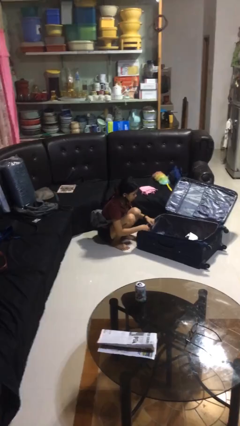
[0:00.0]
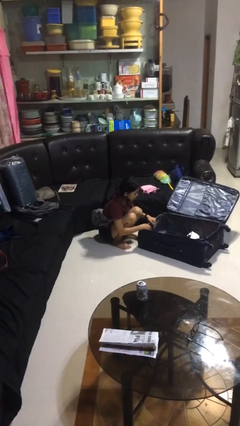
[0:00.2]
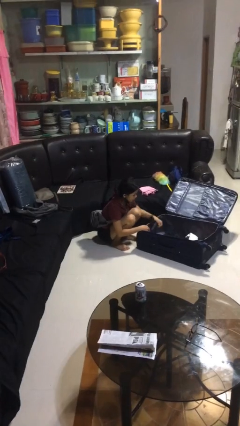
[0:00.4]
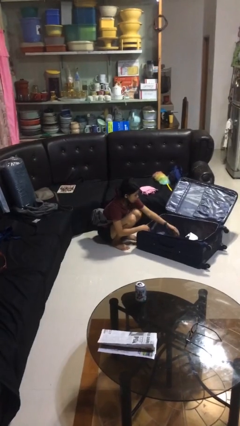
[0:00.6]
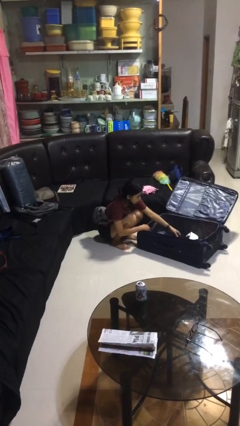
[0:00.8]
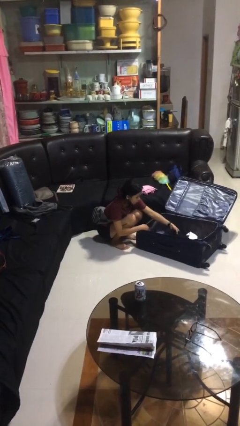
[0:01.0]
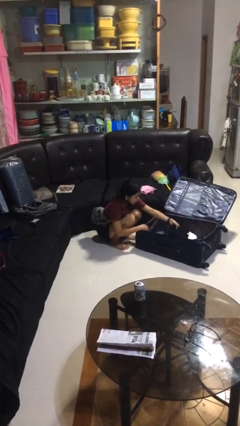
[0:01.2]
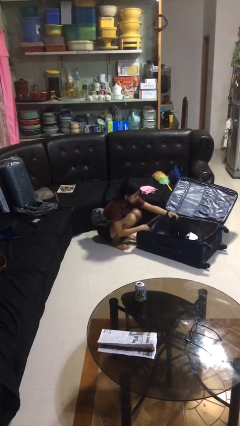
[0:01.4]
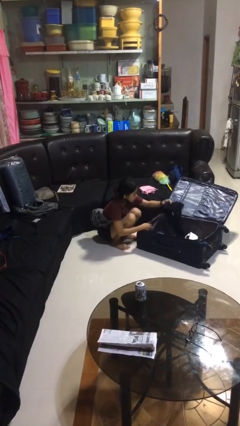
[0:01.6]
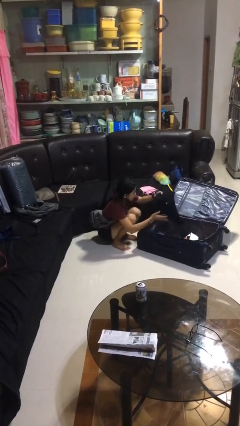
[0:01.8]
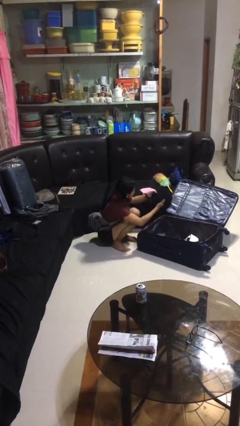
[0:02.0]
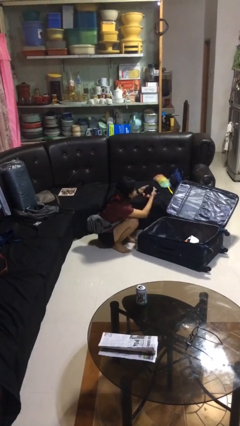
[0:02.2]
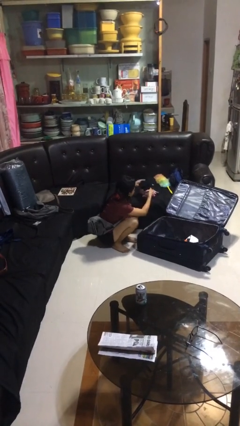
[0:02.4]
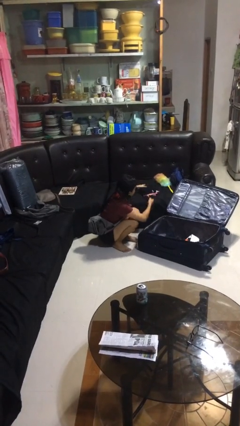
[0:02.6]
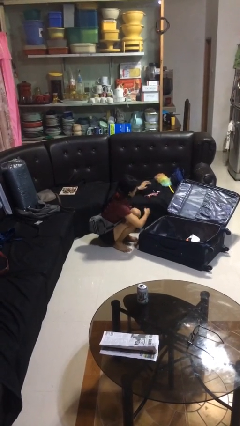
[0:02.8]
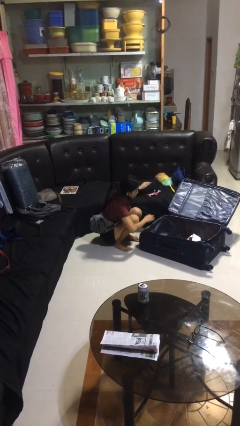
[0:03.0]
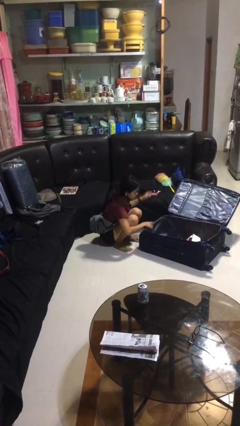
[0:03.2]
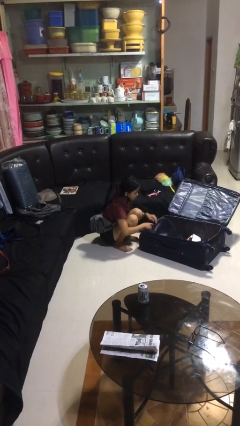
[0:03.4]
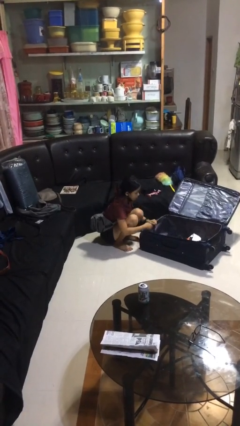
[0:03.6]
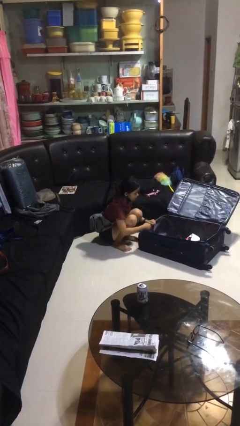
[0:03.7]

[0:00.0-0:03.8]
person loads clothes into suitcase

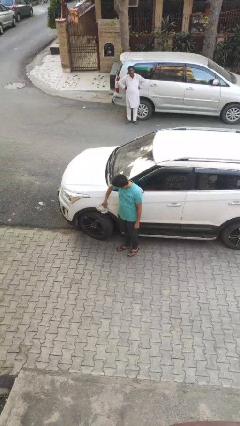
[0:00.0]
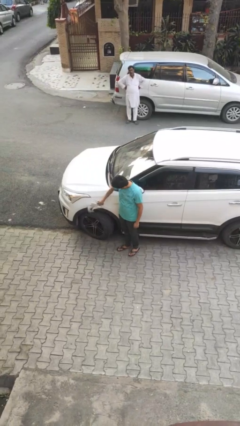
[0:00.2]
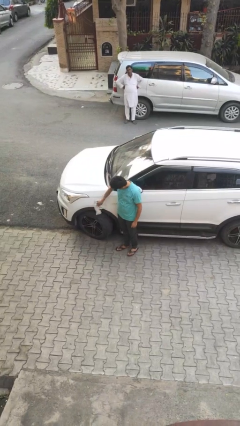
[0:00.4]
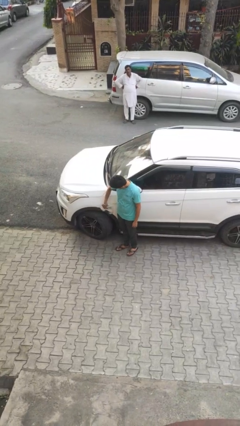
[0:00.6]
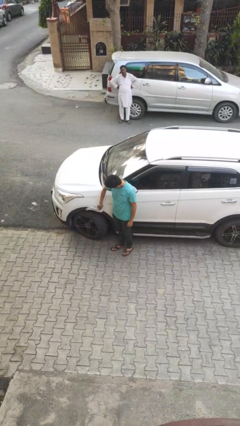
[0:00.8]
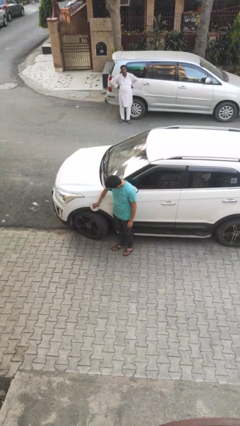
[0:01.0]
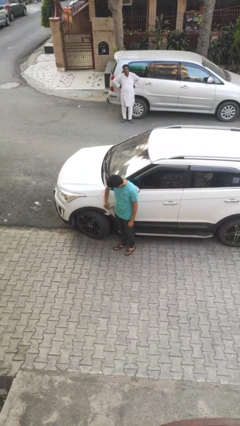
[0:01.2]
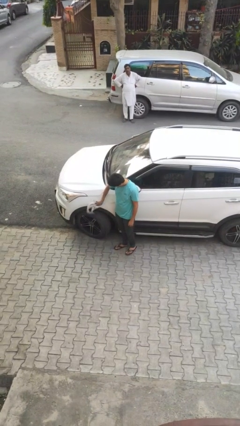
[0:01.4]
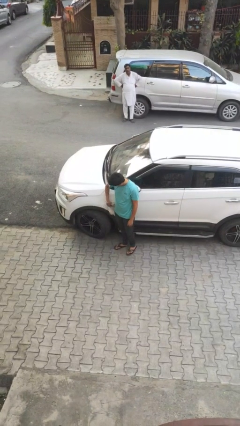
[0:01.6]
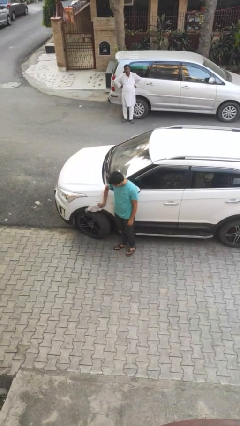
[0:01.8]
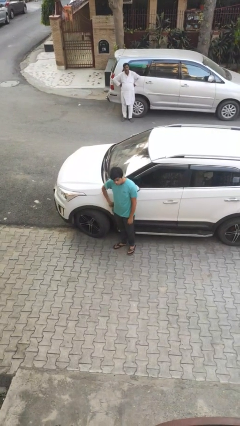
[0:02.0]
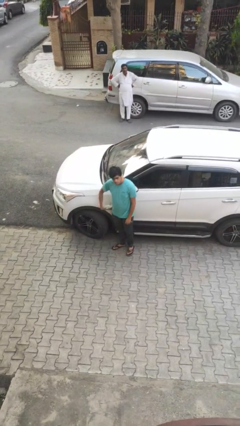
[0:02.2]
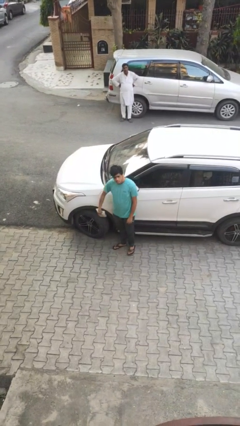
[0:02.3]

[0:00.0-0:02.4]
person polishes car with rag

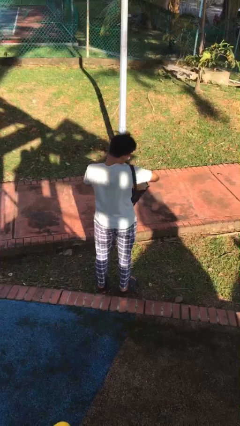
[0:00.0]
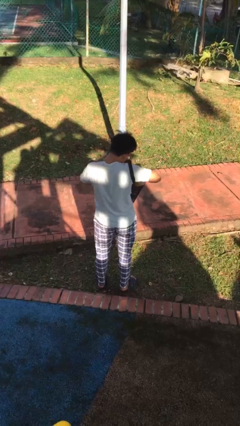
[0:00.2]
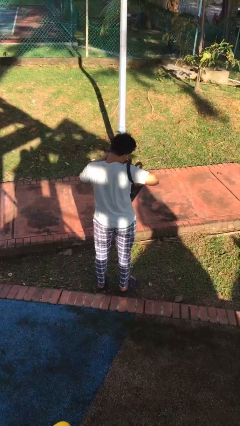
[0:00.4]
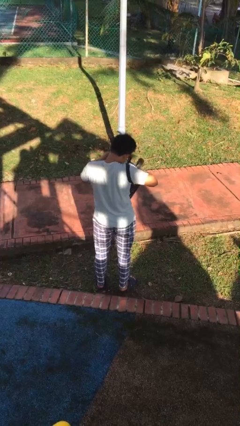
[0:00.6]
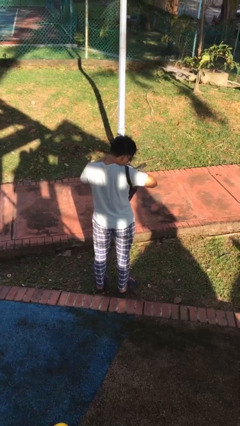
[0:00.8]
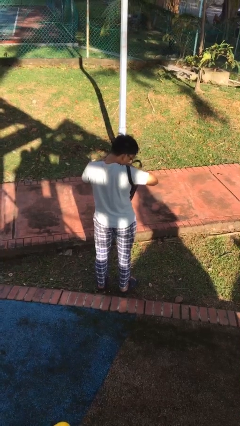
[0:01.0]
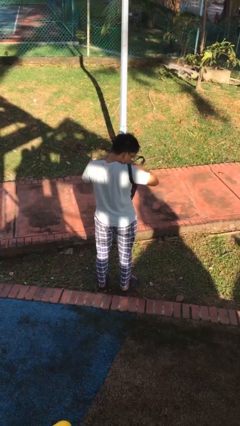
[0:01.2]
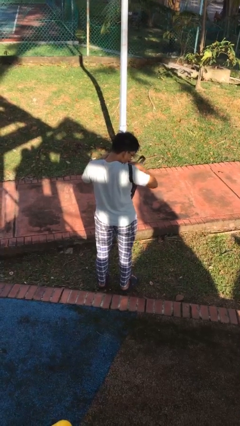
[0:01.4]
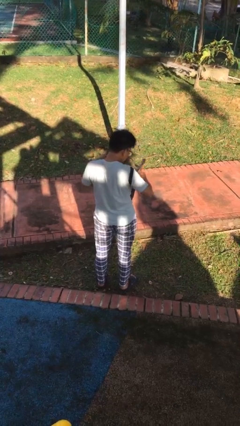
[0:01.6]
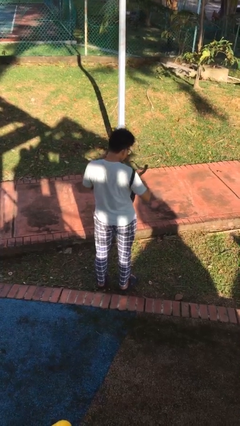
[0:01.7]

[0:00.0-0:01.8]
person searches in bag

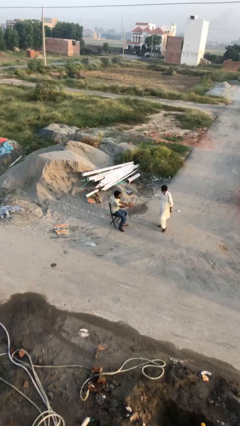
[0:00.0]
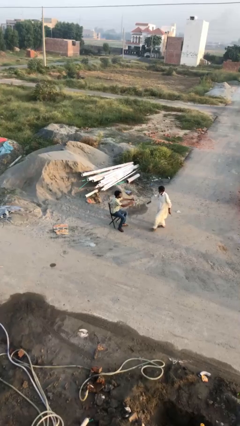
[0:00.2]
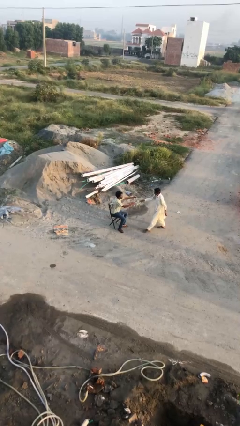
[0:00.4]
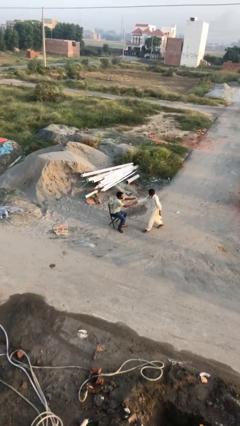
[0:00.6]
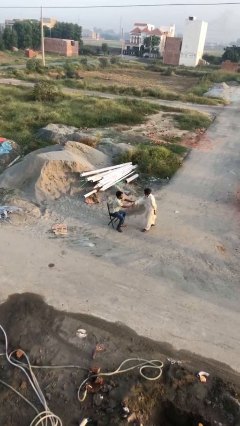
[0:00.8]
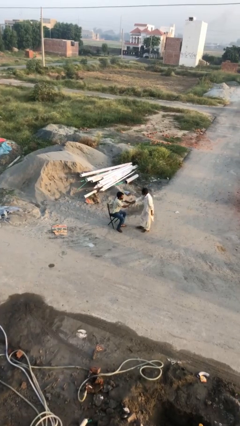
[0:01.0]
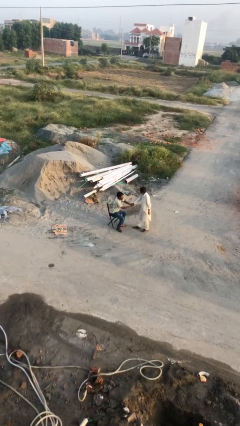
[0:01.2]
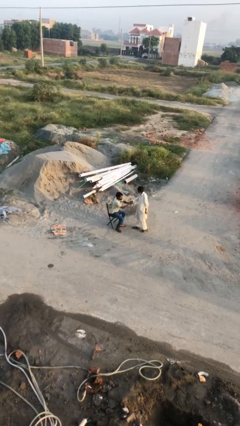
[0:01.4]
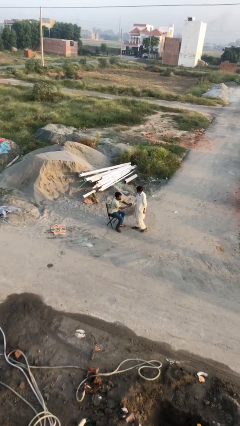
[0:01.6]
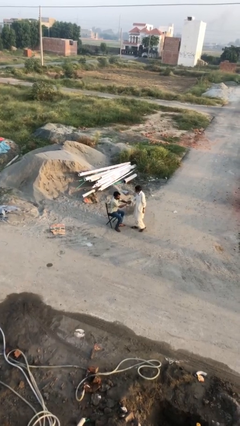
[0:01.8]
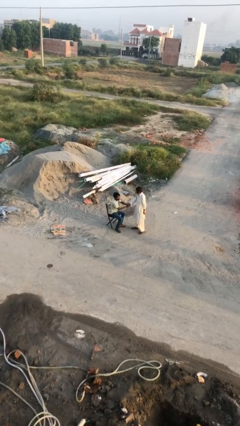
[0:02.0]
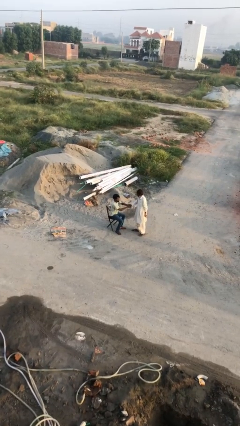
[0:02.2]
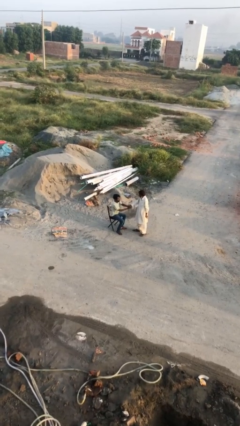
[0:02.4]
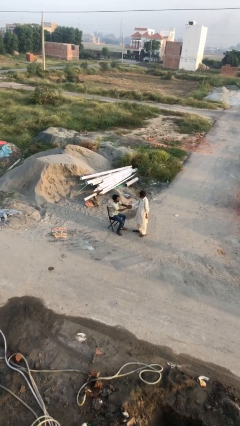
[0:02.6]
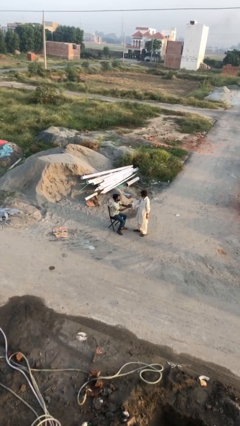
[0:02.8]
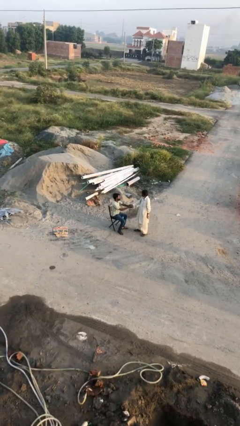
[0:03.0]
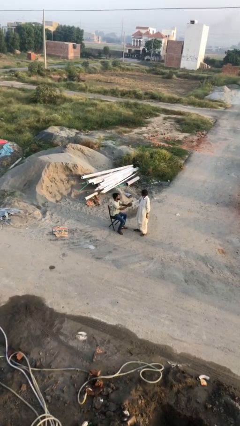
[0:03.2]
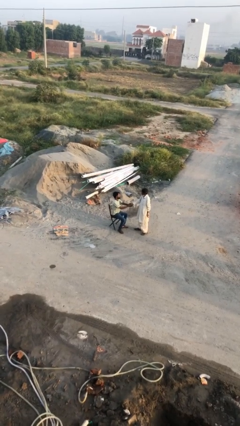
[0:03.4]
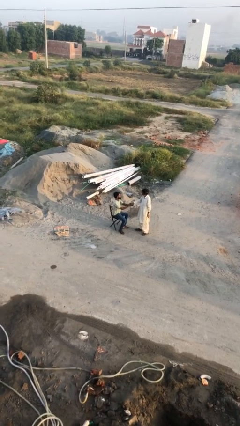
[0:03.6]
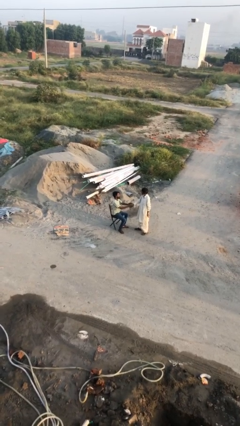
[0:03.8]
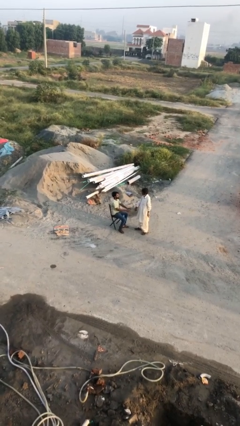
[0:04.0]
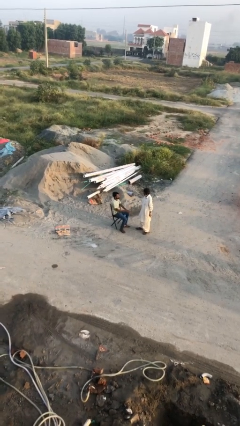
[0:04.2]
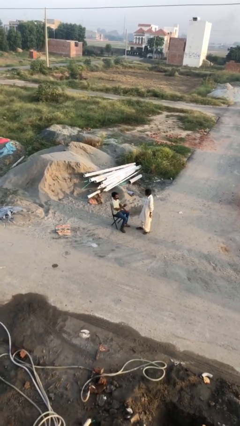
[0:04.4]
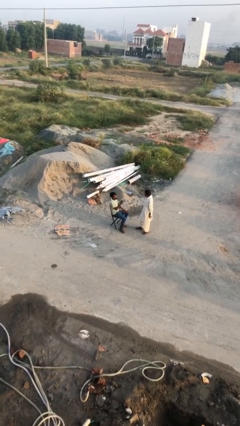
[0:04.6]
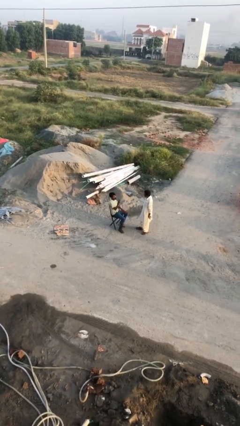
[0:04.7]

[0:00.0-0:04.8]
person shakes hand

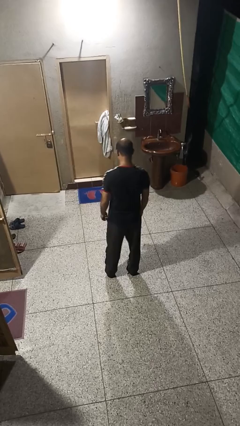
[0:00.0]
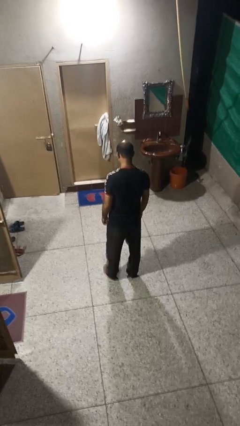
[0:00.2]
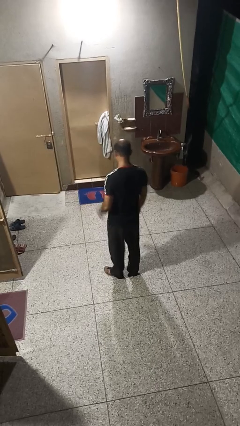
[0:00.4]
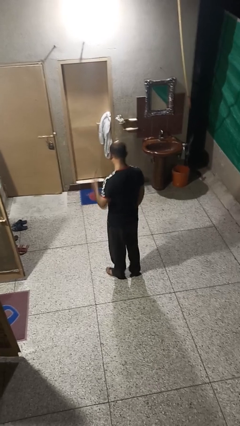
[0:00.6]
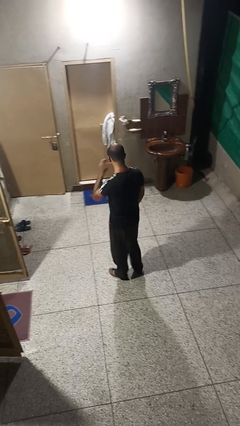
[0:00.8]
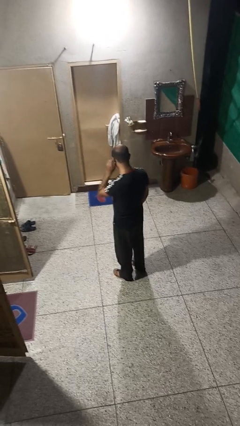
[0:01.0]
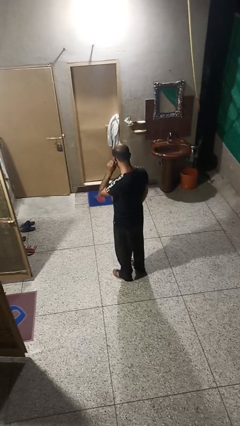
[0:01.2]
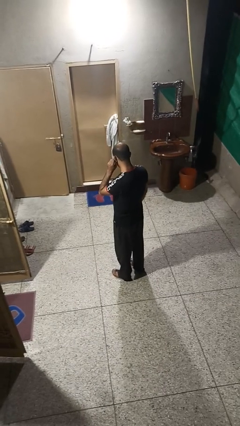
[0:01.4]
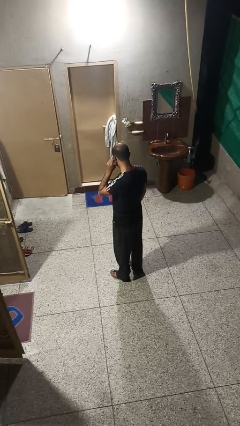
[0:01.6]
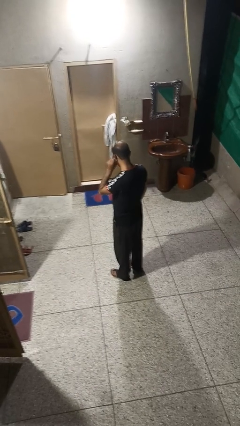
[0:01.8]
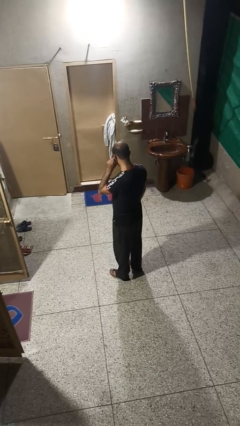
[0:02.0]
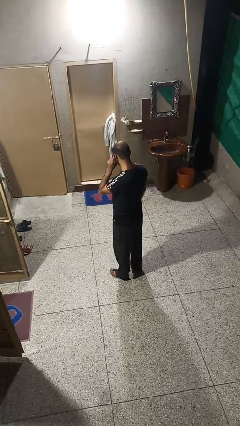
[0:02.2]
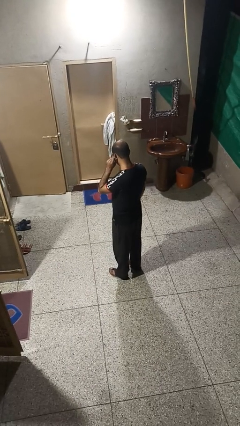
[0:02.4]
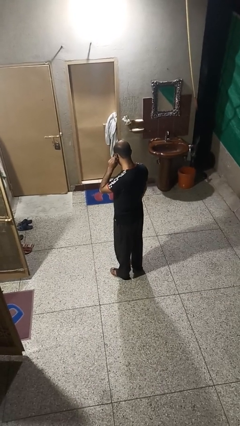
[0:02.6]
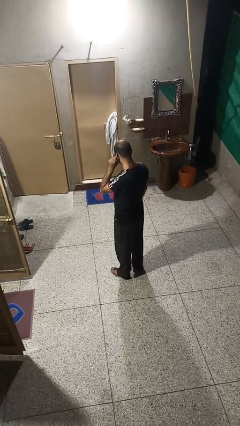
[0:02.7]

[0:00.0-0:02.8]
person touches earlobe

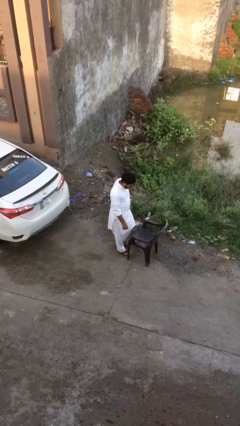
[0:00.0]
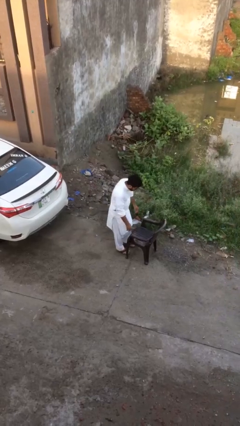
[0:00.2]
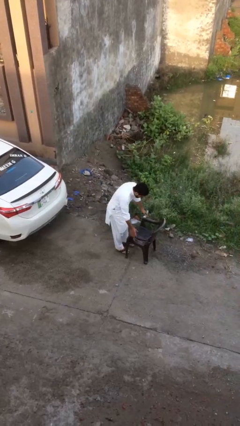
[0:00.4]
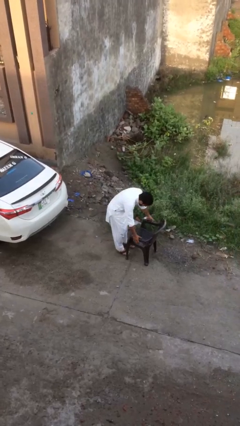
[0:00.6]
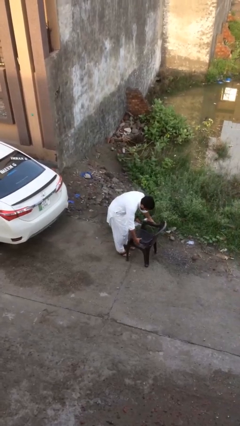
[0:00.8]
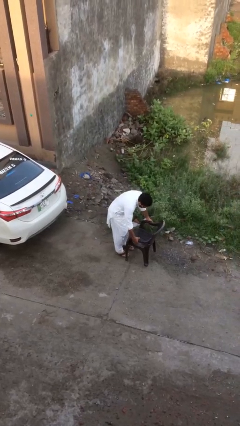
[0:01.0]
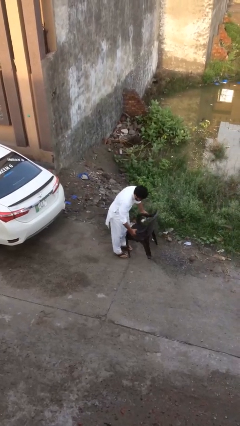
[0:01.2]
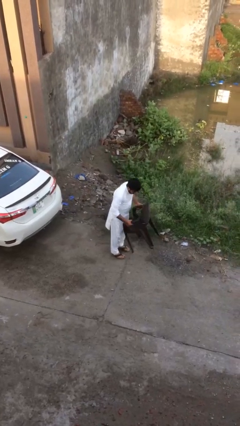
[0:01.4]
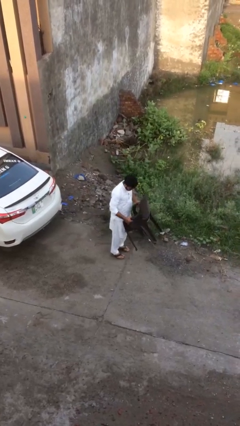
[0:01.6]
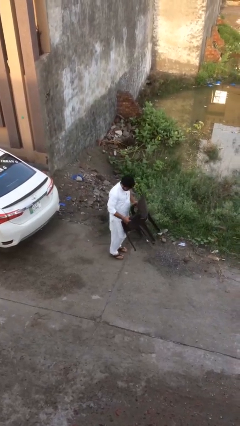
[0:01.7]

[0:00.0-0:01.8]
person picks up object from floor

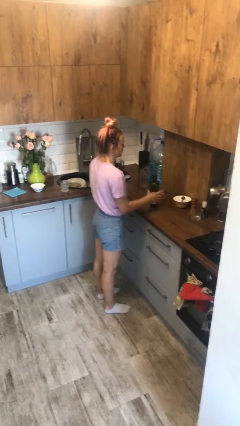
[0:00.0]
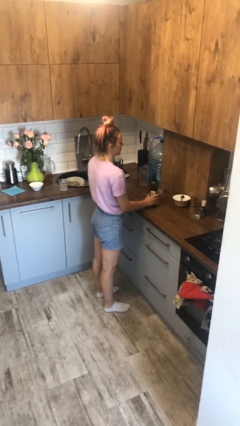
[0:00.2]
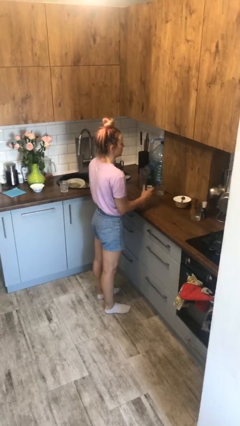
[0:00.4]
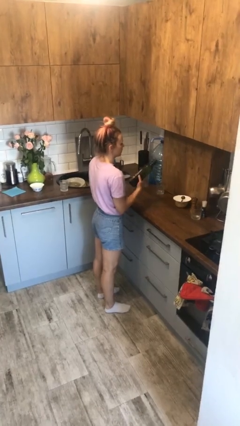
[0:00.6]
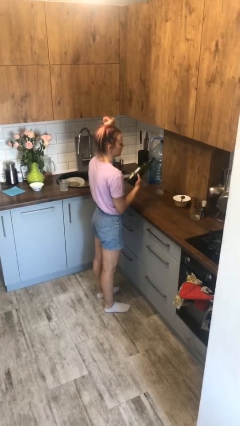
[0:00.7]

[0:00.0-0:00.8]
person picks up object from countertop
